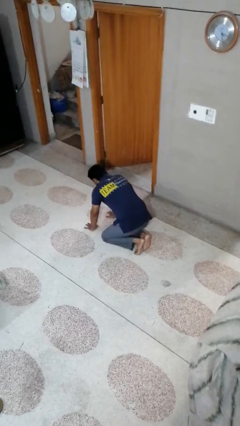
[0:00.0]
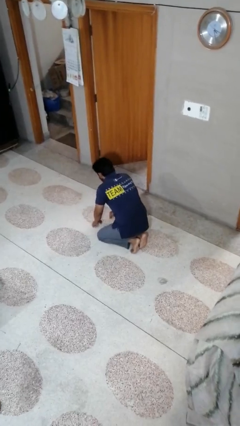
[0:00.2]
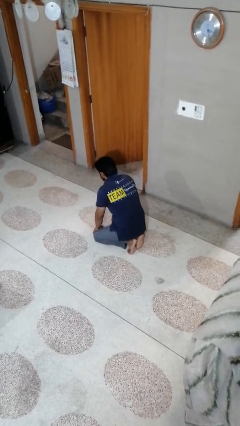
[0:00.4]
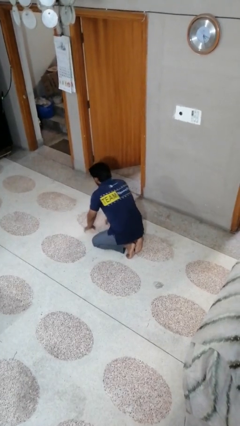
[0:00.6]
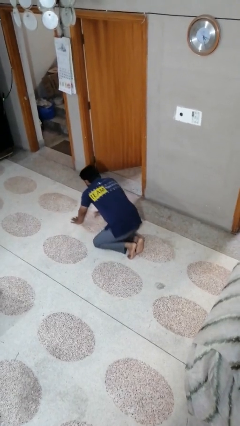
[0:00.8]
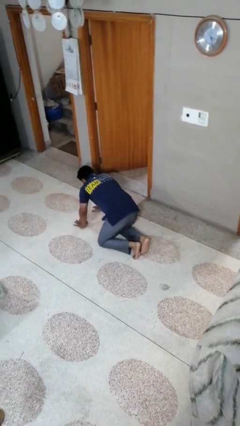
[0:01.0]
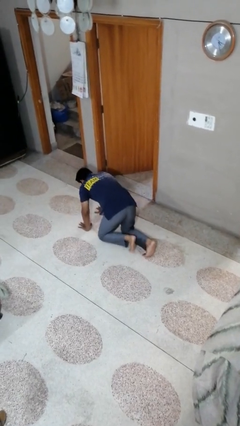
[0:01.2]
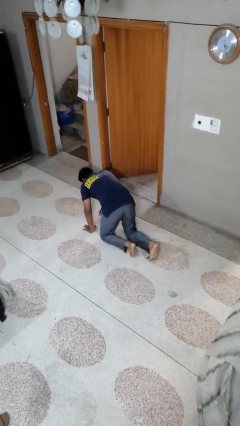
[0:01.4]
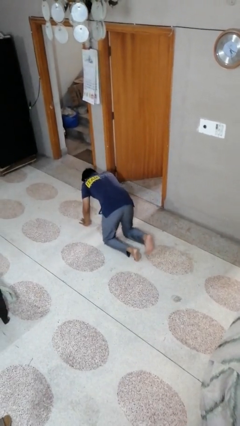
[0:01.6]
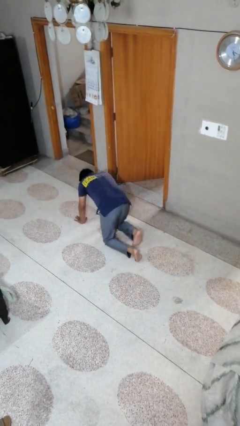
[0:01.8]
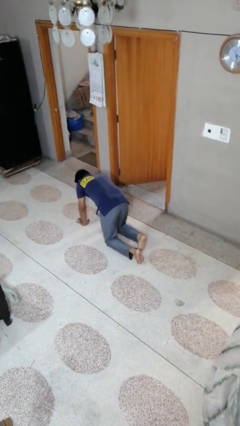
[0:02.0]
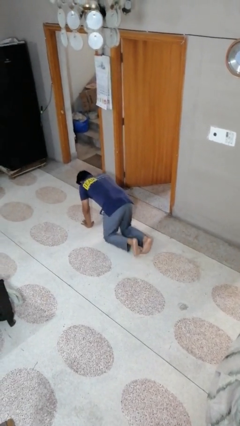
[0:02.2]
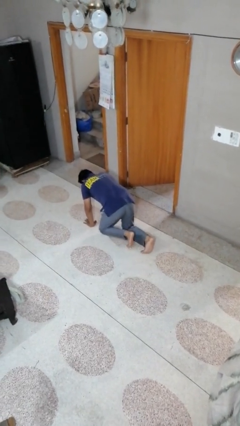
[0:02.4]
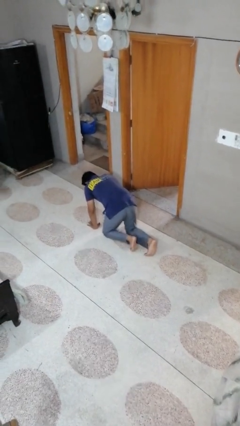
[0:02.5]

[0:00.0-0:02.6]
person crawls

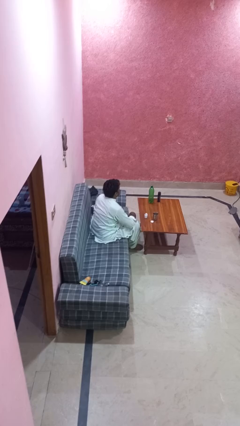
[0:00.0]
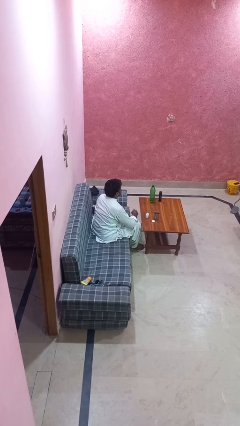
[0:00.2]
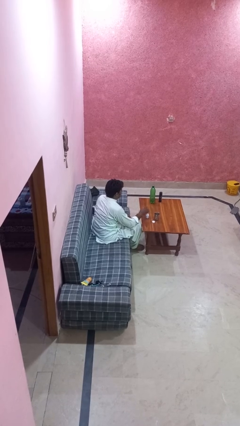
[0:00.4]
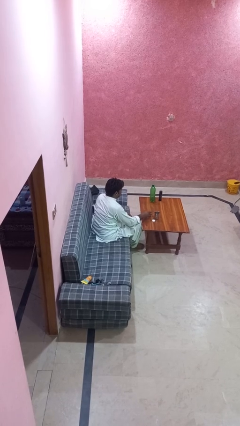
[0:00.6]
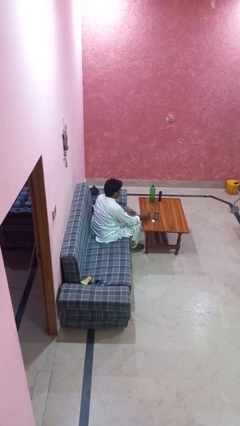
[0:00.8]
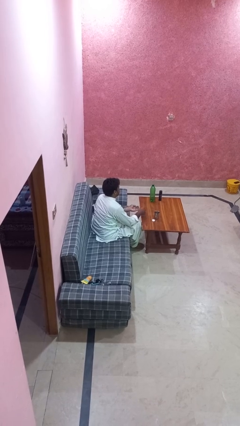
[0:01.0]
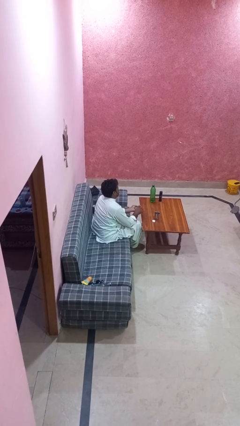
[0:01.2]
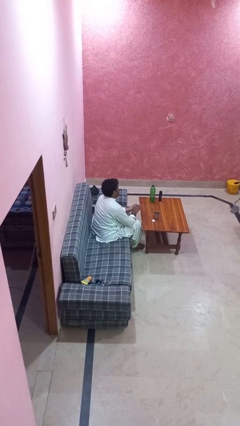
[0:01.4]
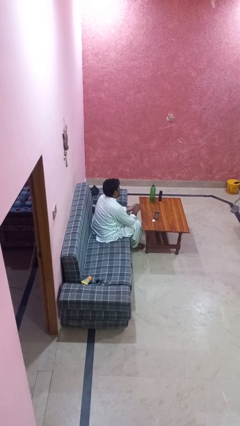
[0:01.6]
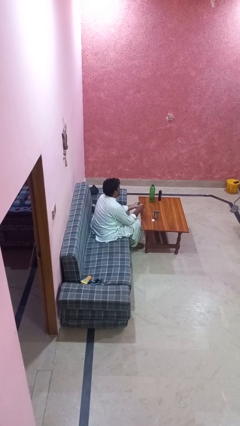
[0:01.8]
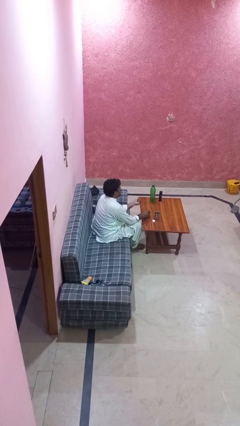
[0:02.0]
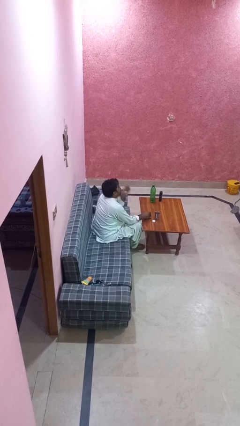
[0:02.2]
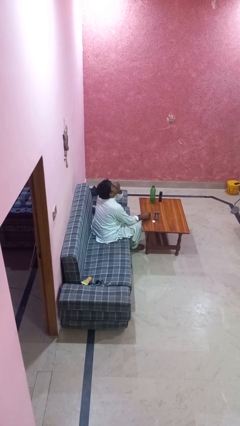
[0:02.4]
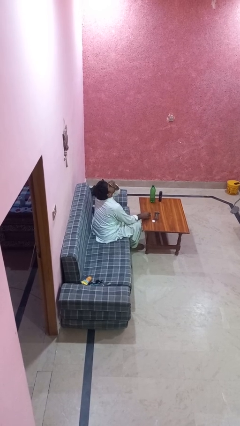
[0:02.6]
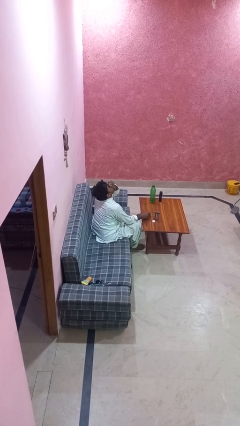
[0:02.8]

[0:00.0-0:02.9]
person takes medicine pills

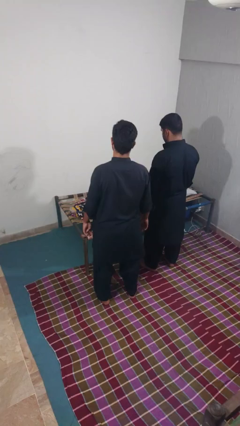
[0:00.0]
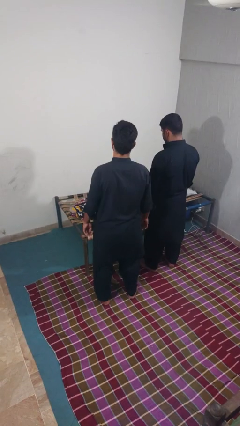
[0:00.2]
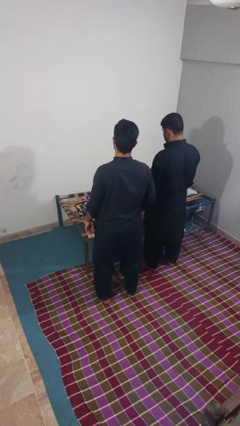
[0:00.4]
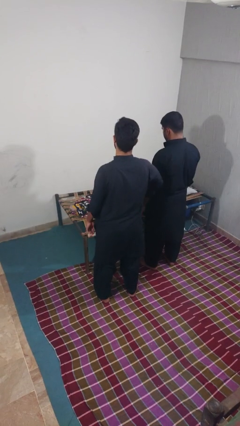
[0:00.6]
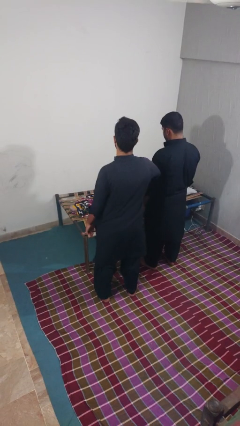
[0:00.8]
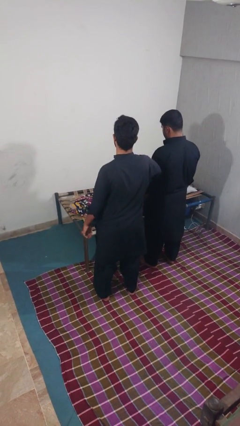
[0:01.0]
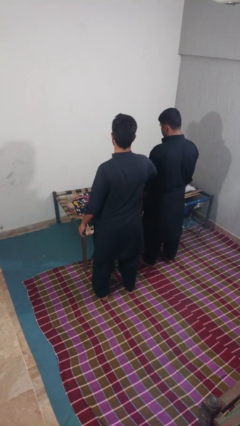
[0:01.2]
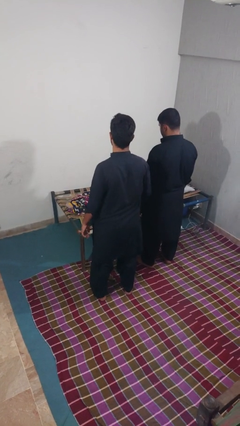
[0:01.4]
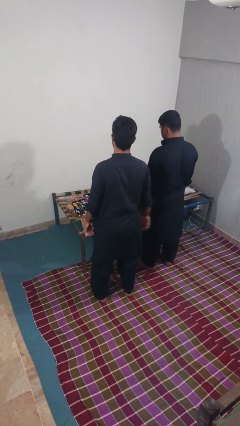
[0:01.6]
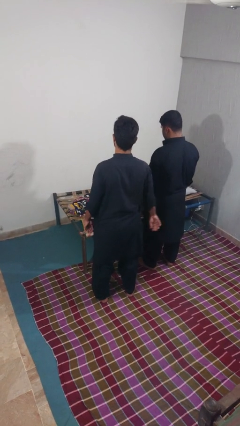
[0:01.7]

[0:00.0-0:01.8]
person nudges person with elbow

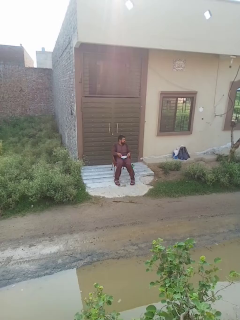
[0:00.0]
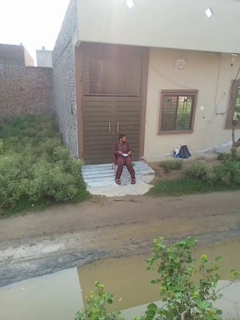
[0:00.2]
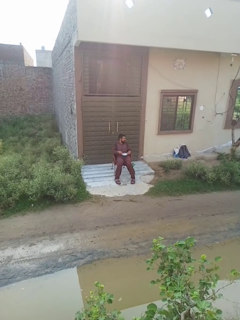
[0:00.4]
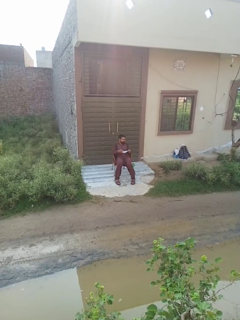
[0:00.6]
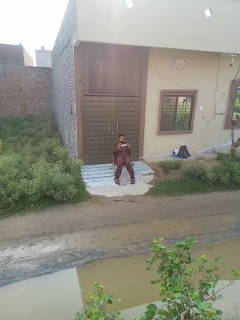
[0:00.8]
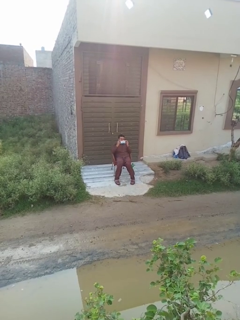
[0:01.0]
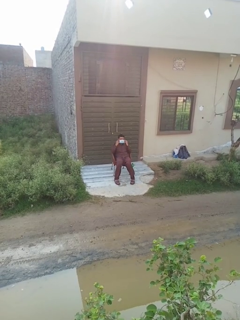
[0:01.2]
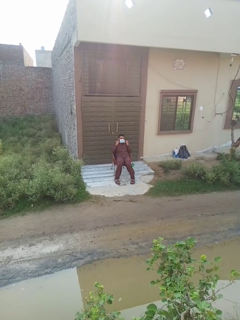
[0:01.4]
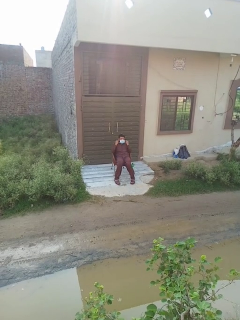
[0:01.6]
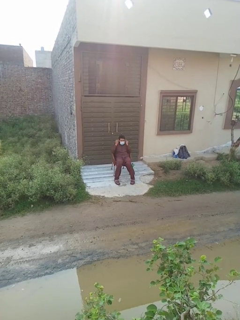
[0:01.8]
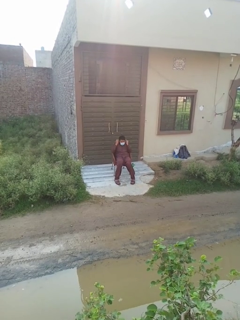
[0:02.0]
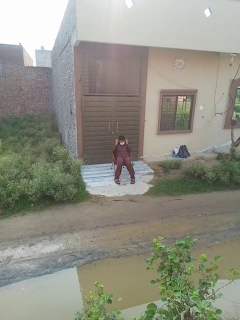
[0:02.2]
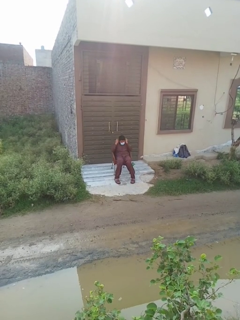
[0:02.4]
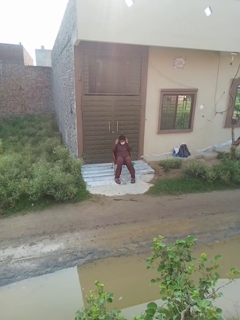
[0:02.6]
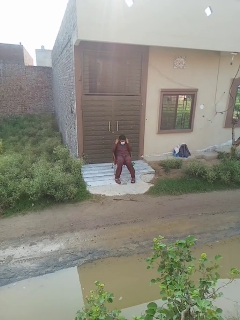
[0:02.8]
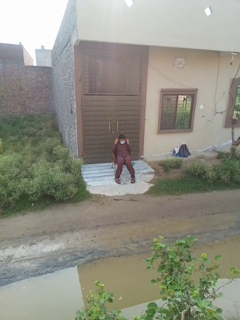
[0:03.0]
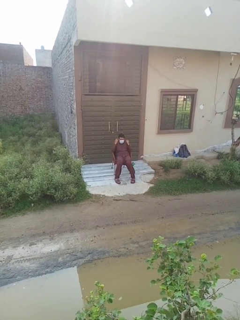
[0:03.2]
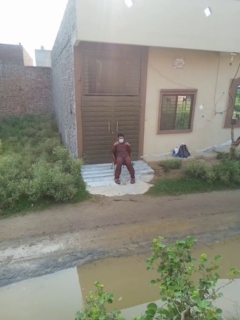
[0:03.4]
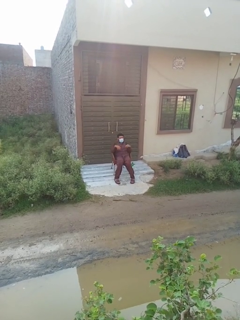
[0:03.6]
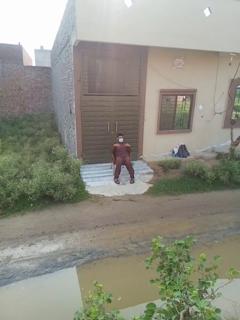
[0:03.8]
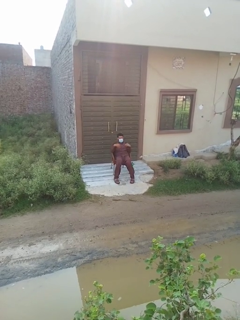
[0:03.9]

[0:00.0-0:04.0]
person puts on facemask

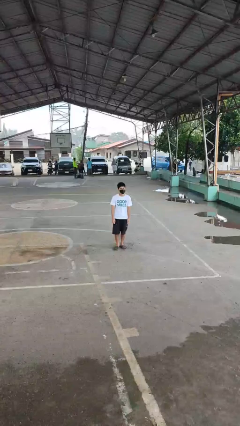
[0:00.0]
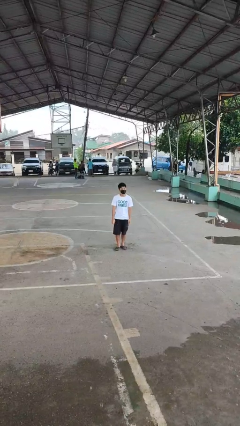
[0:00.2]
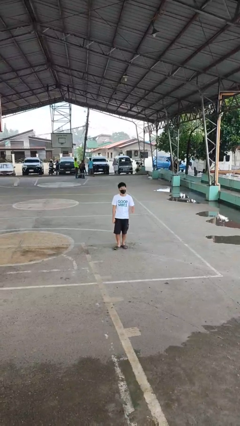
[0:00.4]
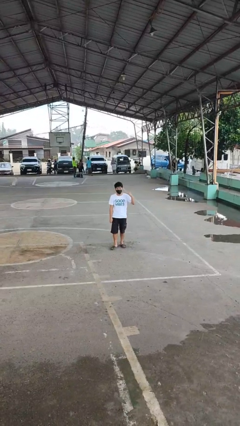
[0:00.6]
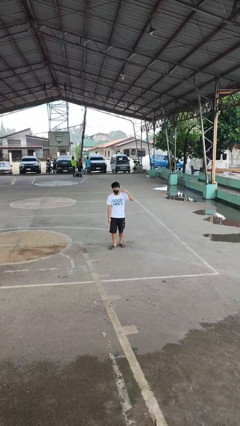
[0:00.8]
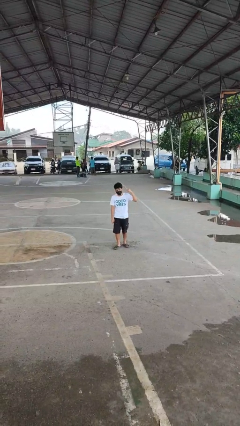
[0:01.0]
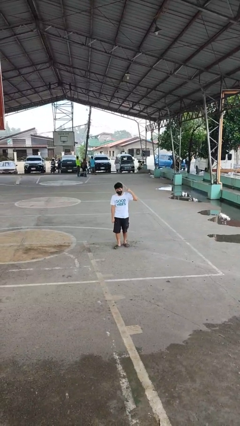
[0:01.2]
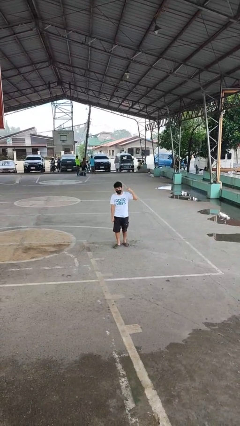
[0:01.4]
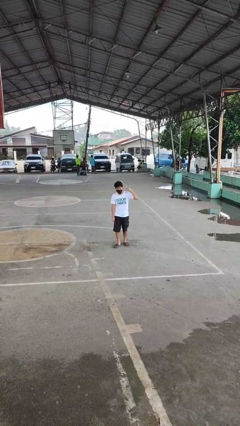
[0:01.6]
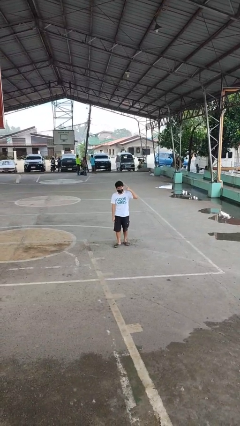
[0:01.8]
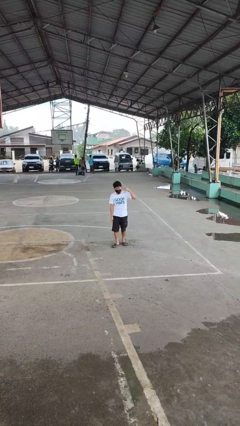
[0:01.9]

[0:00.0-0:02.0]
person gestures listen closely

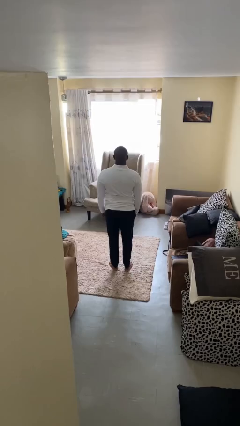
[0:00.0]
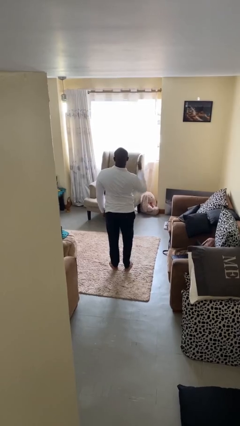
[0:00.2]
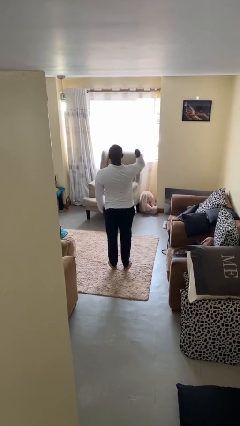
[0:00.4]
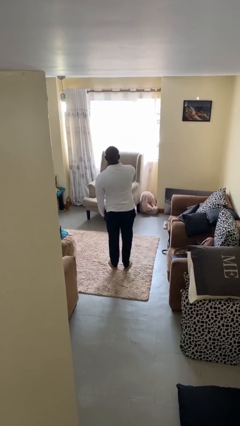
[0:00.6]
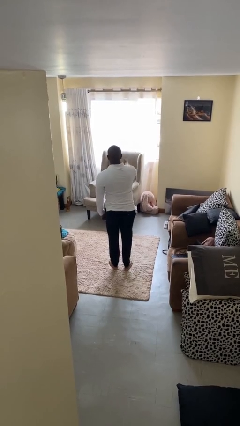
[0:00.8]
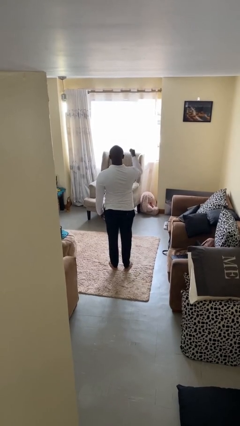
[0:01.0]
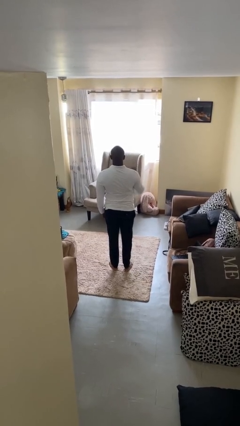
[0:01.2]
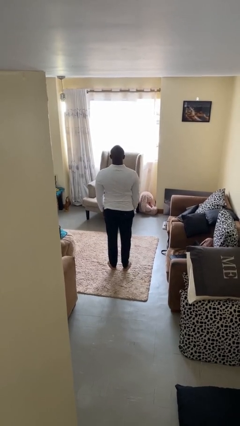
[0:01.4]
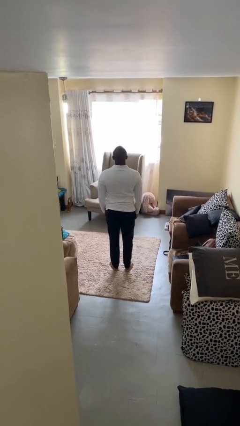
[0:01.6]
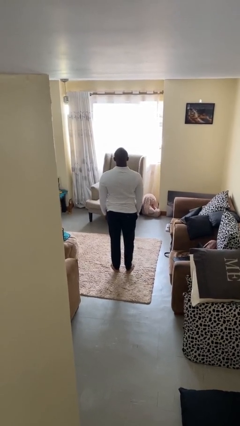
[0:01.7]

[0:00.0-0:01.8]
person karate chop

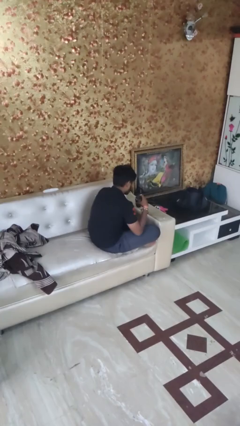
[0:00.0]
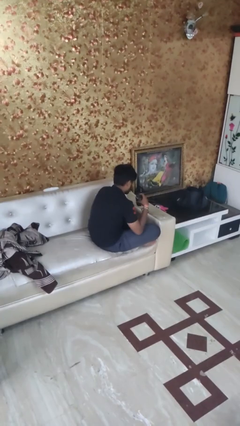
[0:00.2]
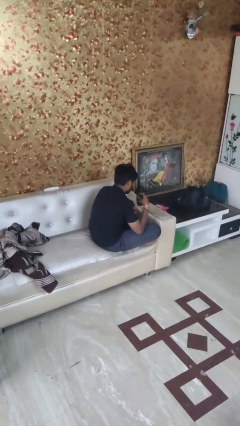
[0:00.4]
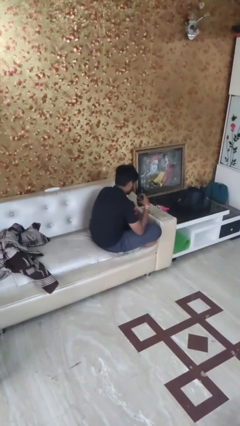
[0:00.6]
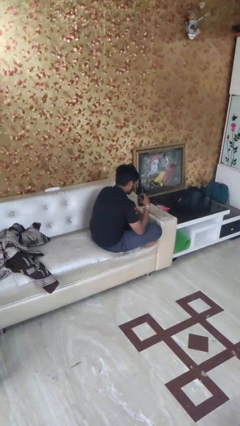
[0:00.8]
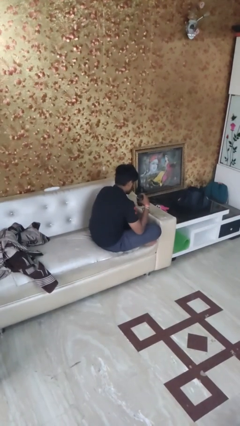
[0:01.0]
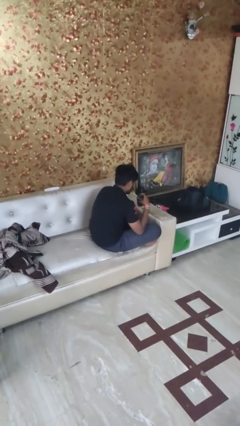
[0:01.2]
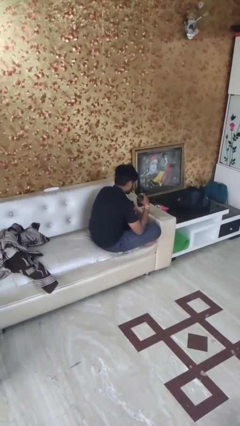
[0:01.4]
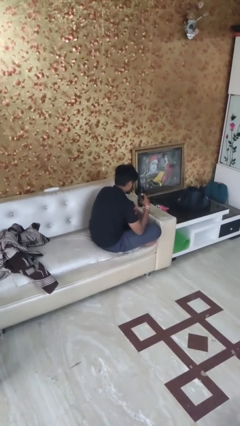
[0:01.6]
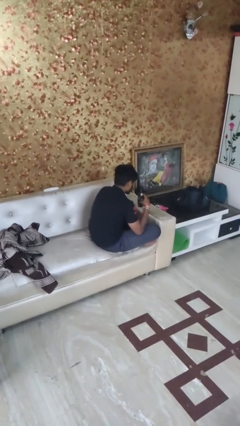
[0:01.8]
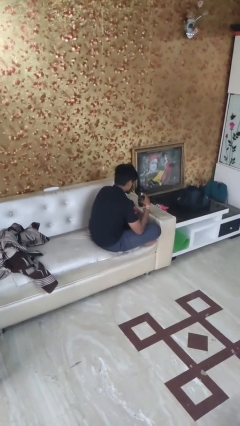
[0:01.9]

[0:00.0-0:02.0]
person drinks from straw

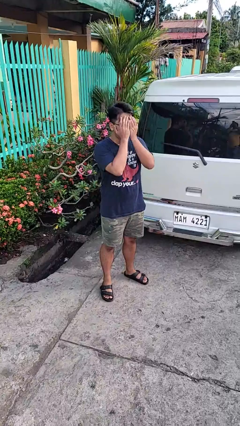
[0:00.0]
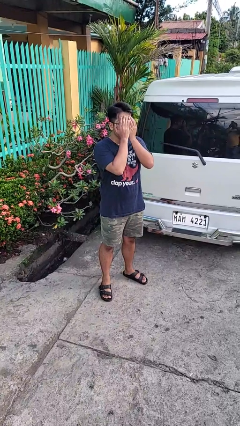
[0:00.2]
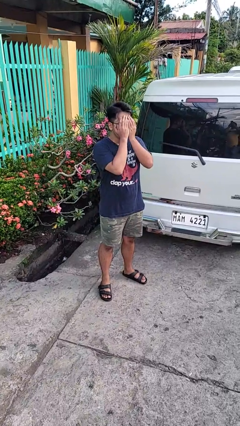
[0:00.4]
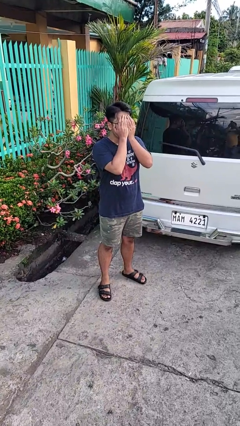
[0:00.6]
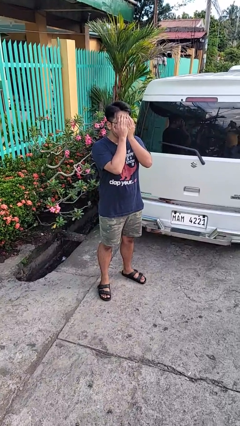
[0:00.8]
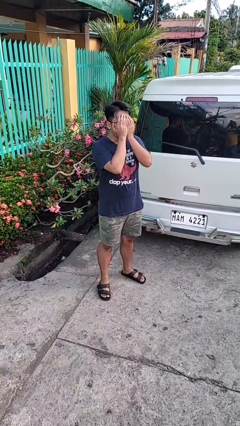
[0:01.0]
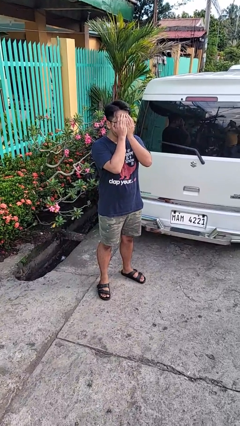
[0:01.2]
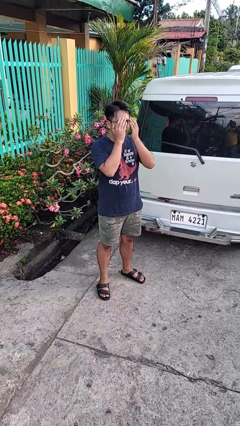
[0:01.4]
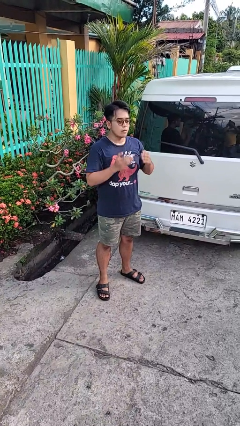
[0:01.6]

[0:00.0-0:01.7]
person covers face with hands
